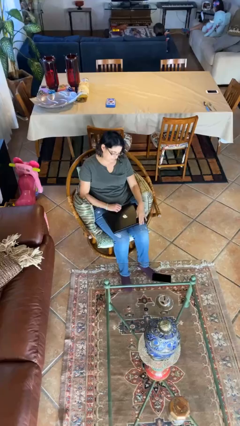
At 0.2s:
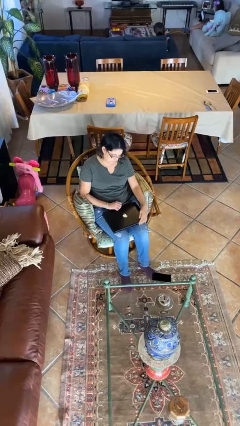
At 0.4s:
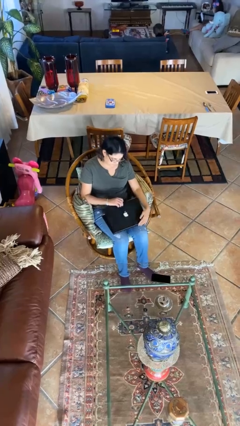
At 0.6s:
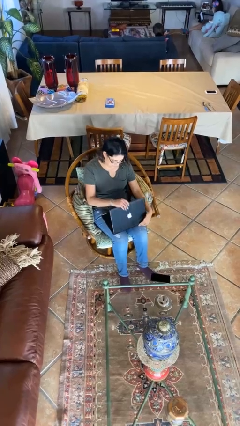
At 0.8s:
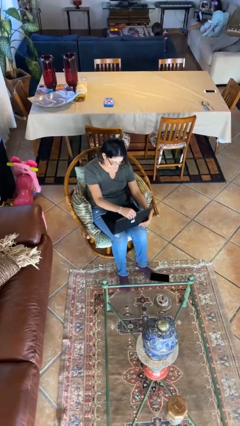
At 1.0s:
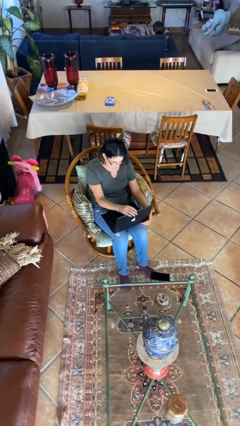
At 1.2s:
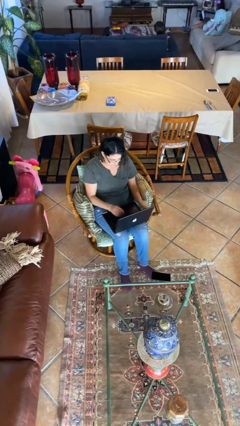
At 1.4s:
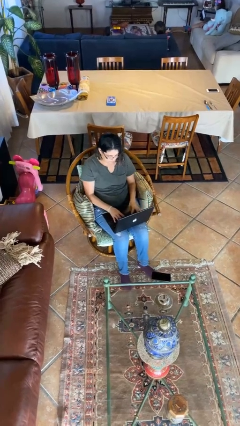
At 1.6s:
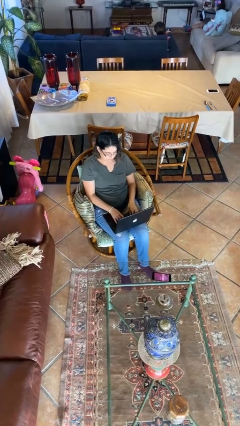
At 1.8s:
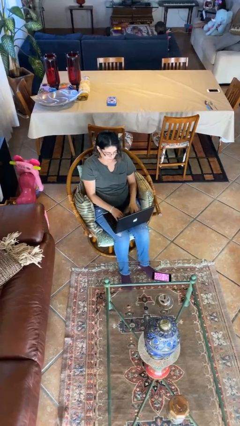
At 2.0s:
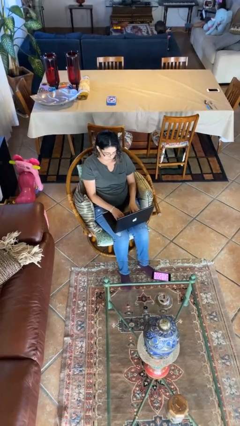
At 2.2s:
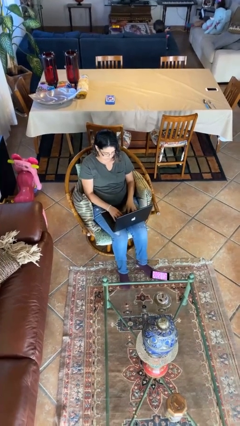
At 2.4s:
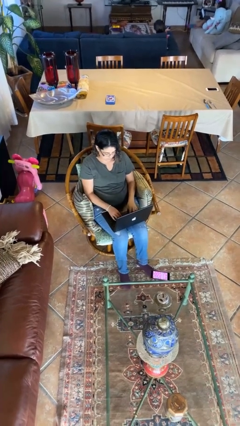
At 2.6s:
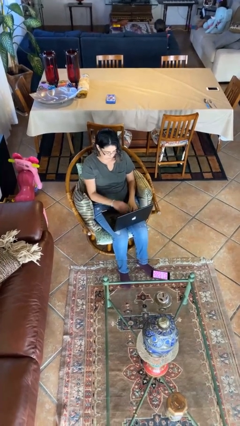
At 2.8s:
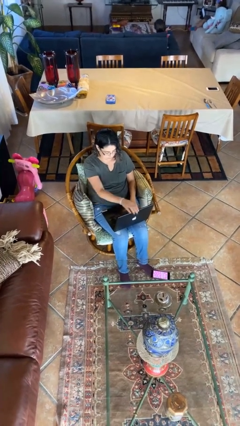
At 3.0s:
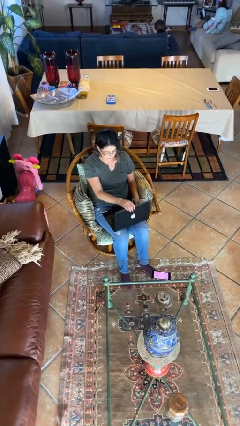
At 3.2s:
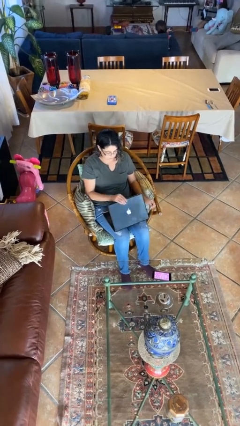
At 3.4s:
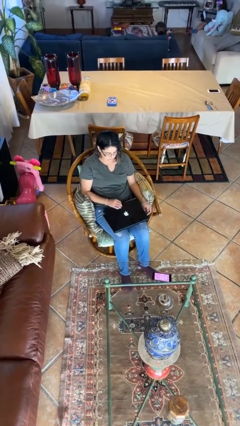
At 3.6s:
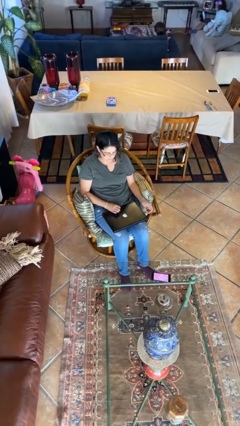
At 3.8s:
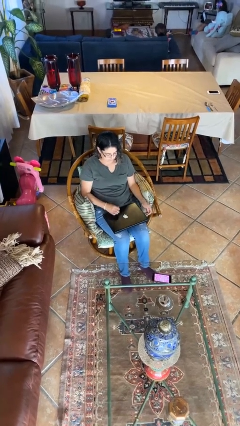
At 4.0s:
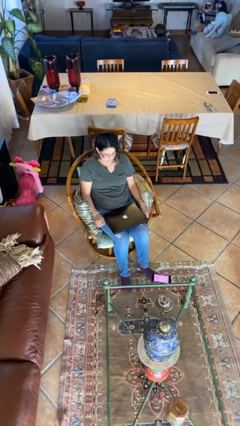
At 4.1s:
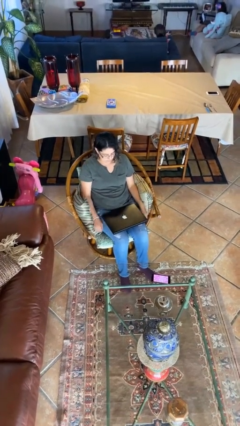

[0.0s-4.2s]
person interacts with laptop

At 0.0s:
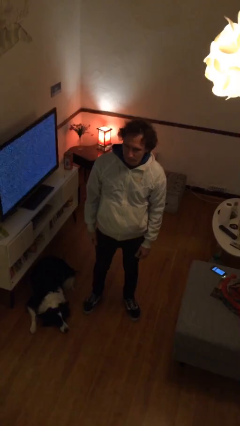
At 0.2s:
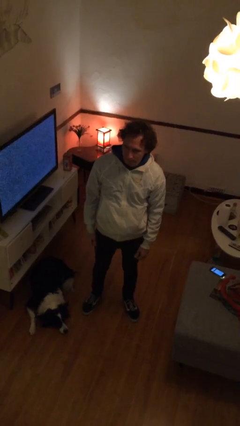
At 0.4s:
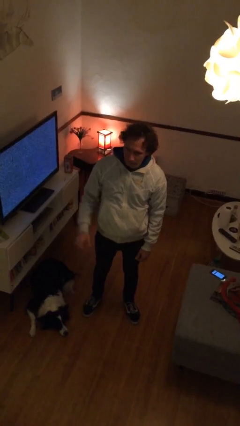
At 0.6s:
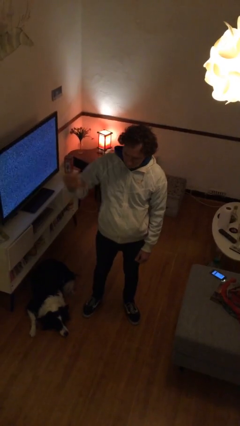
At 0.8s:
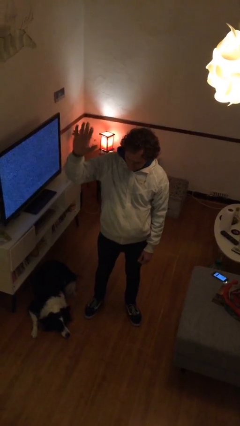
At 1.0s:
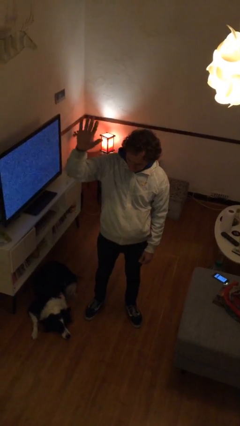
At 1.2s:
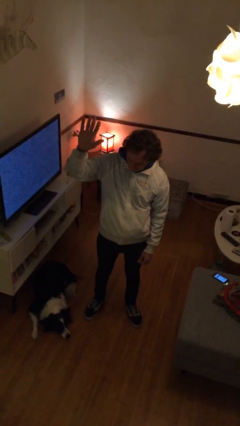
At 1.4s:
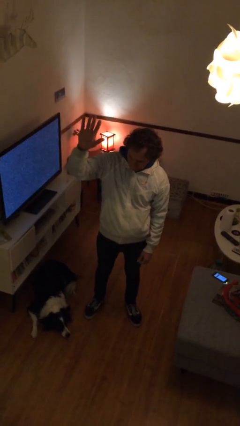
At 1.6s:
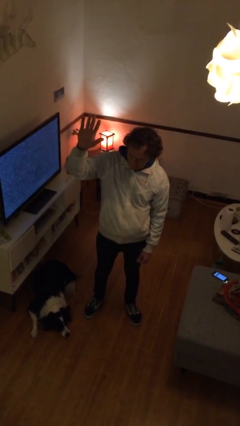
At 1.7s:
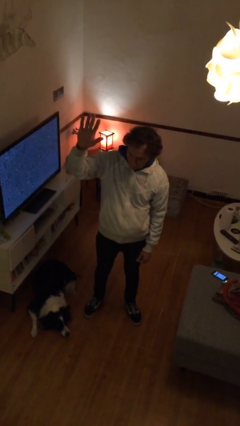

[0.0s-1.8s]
person gestures raise hand

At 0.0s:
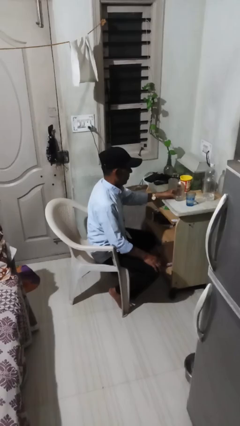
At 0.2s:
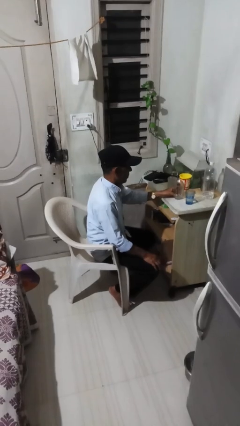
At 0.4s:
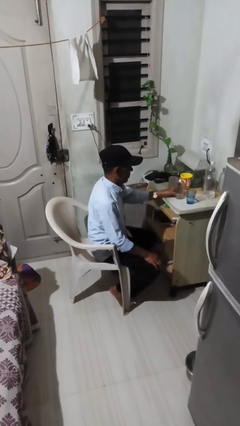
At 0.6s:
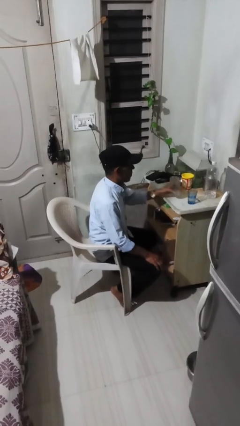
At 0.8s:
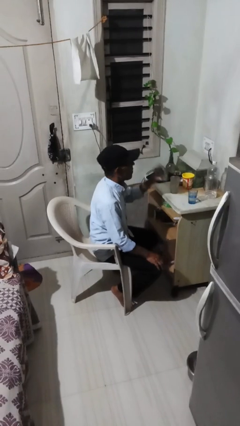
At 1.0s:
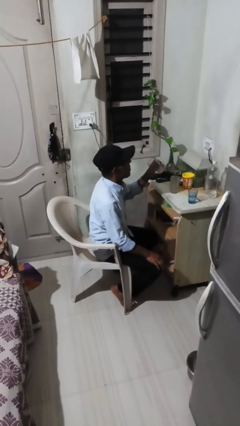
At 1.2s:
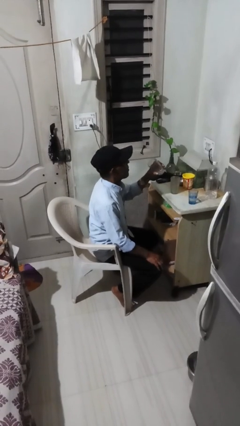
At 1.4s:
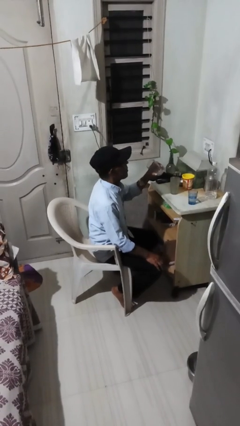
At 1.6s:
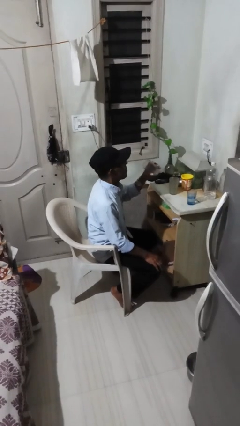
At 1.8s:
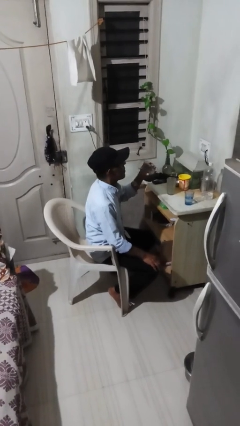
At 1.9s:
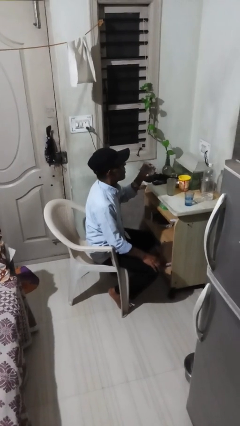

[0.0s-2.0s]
person picks up object from table

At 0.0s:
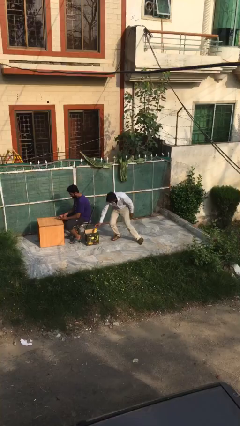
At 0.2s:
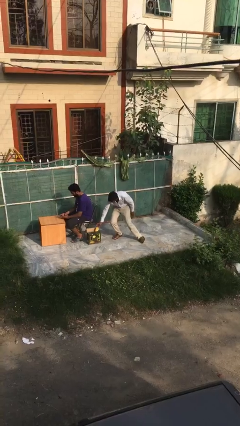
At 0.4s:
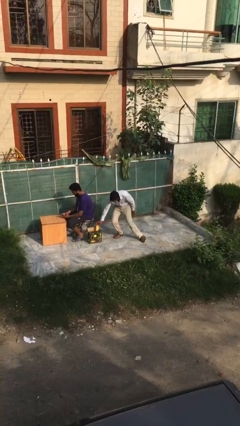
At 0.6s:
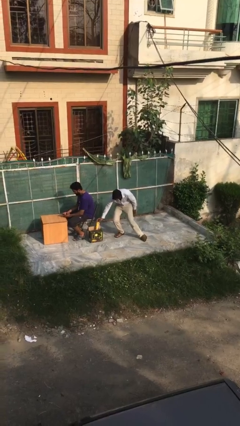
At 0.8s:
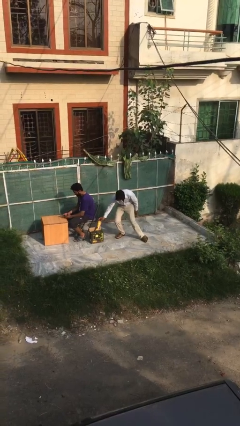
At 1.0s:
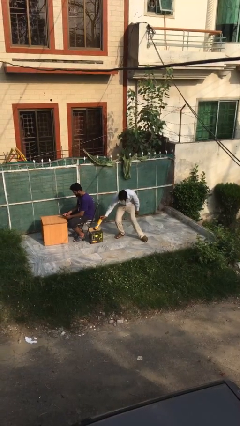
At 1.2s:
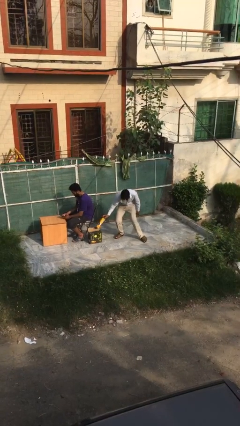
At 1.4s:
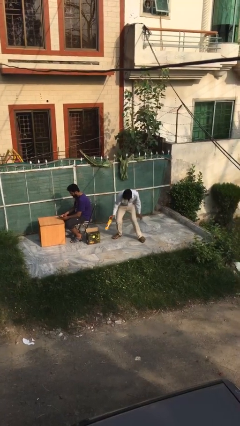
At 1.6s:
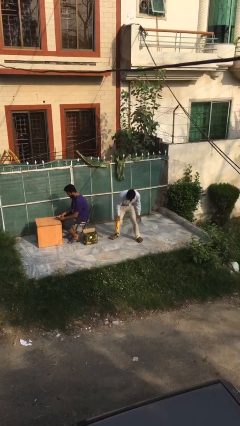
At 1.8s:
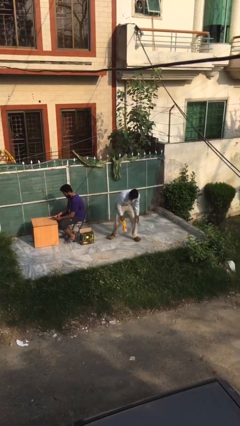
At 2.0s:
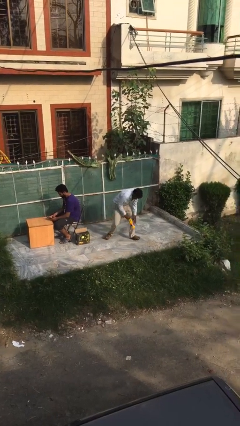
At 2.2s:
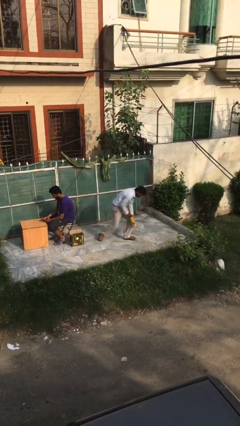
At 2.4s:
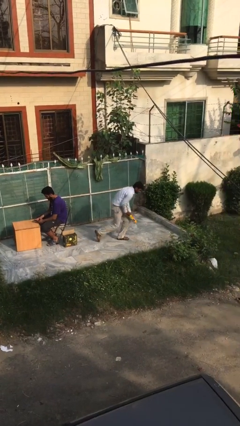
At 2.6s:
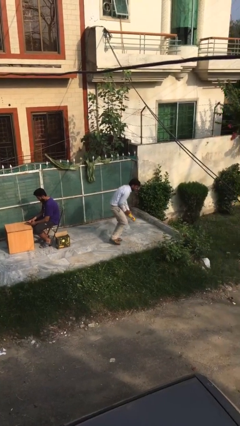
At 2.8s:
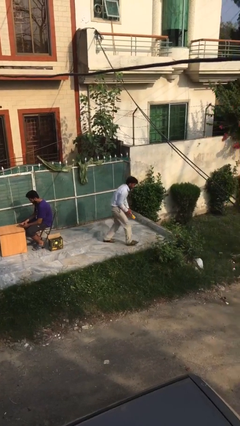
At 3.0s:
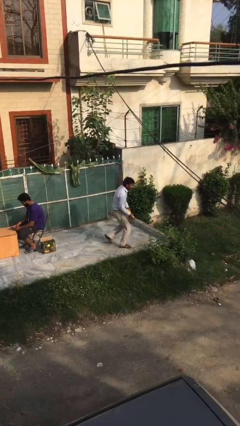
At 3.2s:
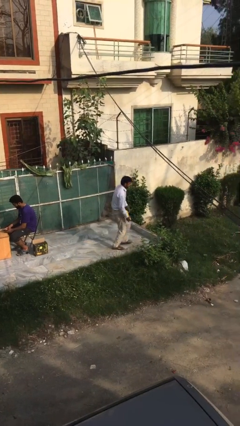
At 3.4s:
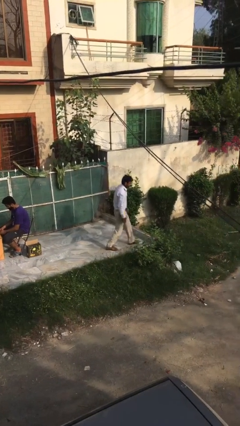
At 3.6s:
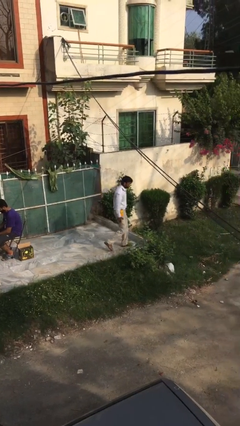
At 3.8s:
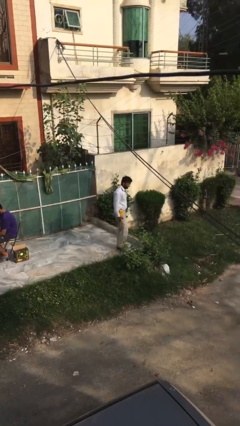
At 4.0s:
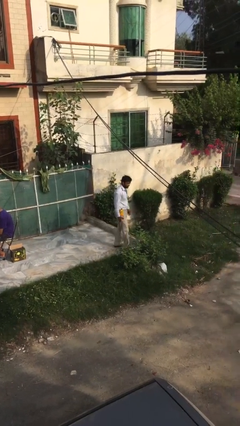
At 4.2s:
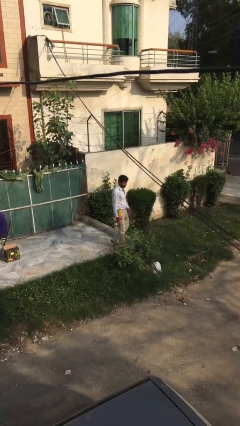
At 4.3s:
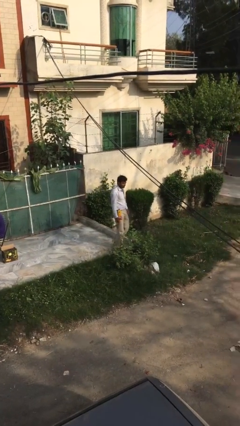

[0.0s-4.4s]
person steals object from person

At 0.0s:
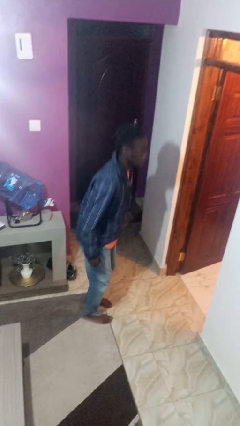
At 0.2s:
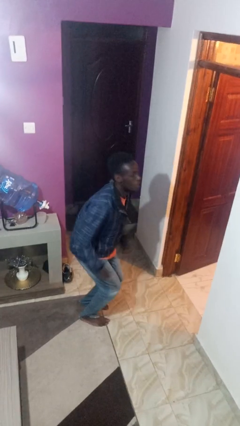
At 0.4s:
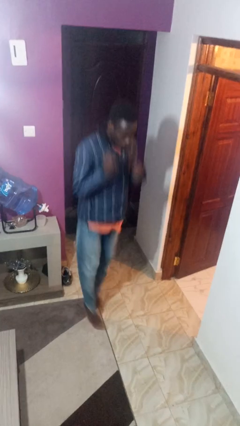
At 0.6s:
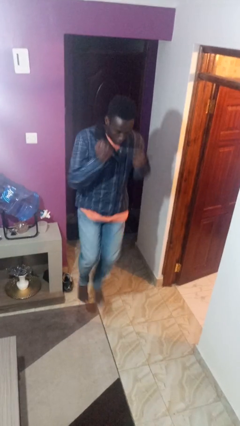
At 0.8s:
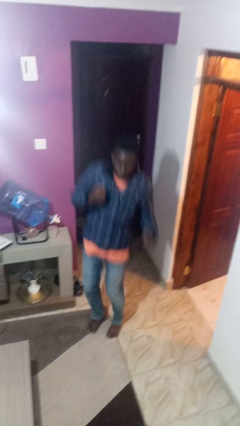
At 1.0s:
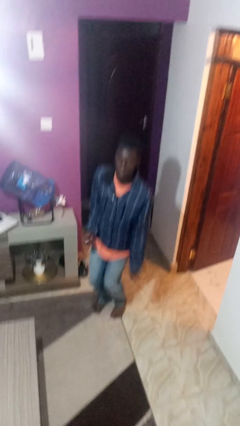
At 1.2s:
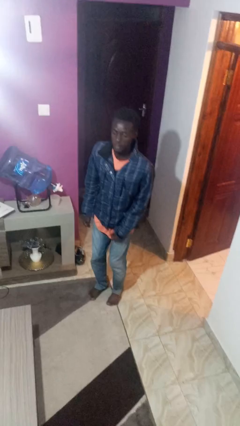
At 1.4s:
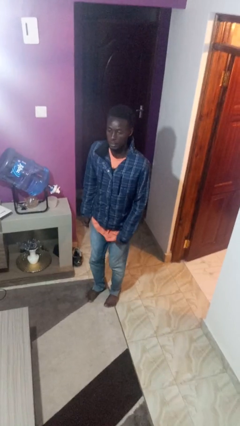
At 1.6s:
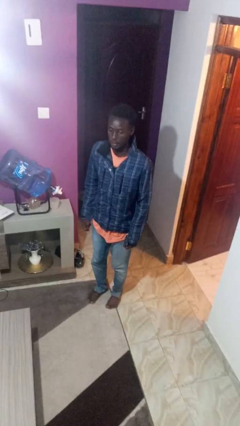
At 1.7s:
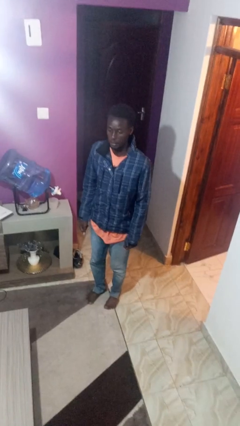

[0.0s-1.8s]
person jumps

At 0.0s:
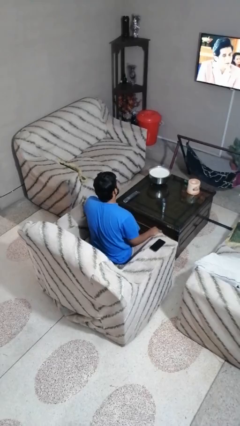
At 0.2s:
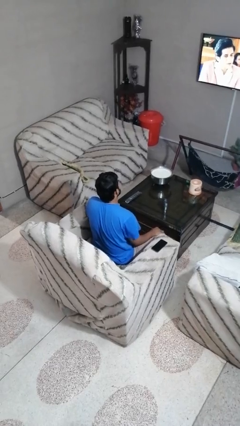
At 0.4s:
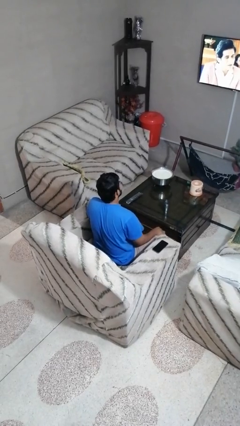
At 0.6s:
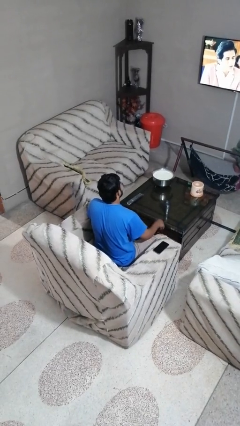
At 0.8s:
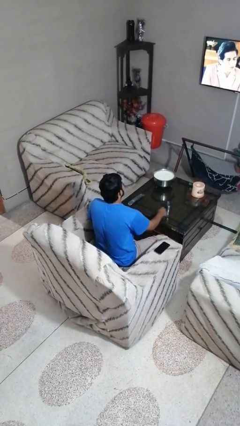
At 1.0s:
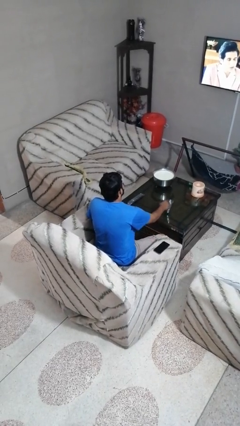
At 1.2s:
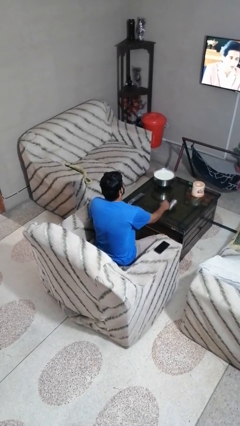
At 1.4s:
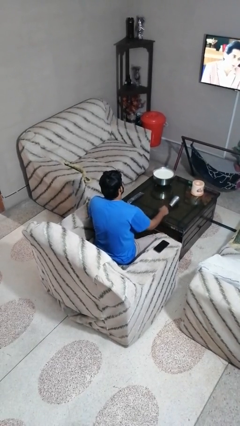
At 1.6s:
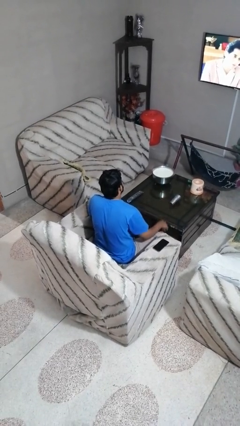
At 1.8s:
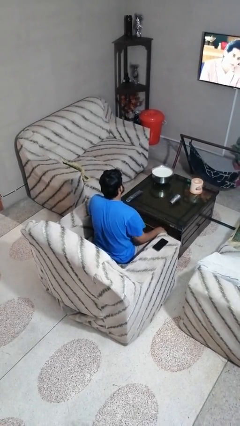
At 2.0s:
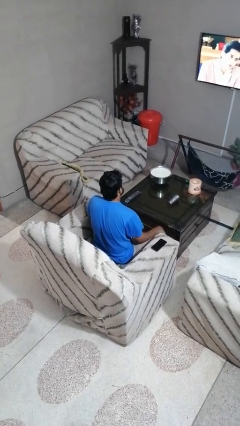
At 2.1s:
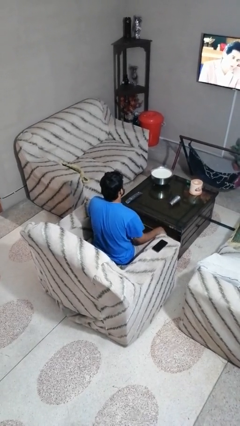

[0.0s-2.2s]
person knocks over glass

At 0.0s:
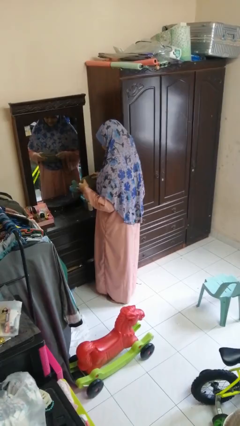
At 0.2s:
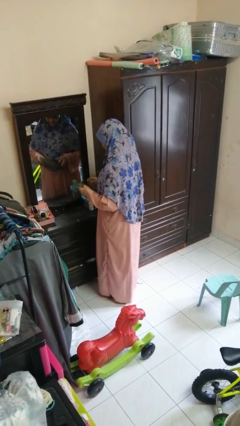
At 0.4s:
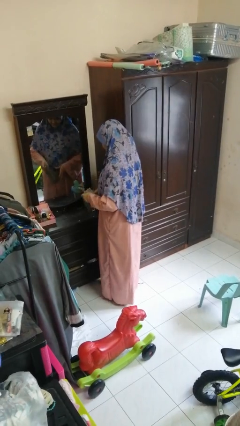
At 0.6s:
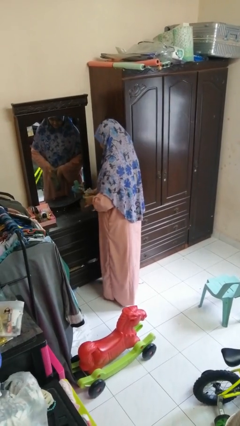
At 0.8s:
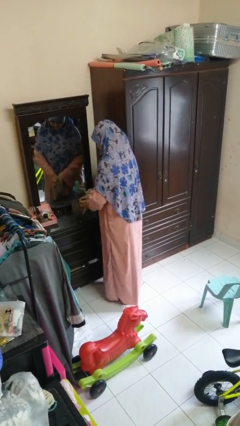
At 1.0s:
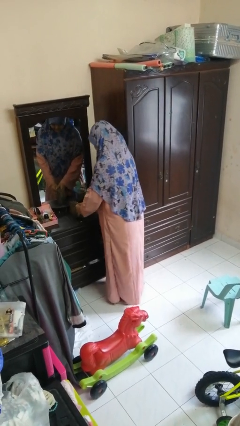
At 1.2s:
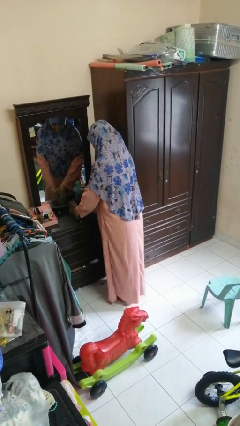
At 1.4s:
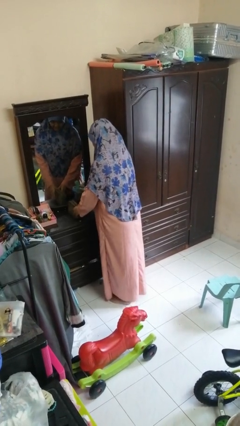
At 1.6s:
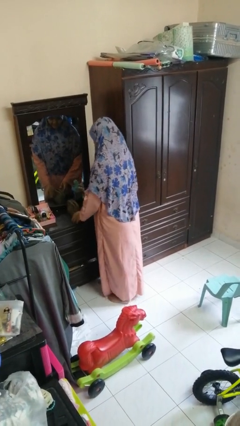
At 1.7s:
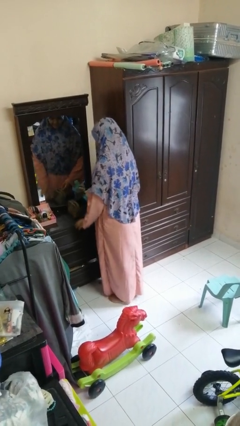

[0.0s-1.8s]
person puts down object on countertop
